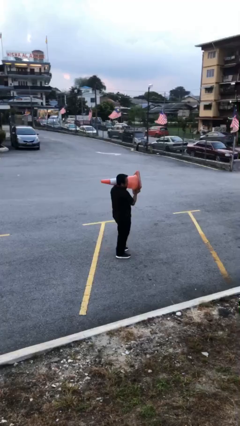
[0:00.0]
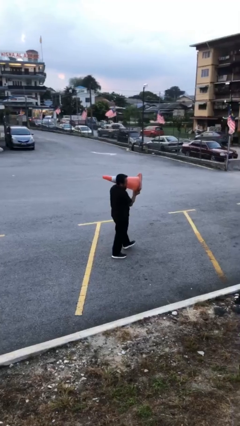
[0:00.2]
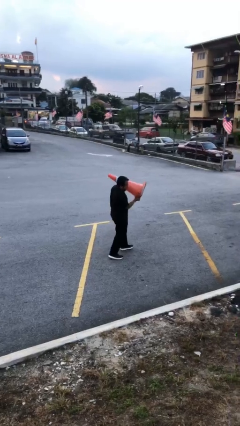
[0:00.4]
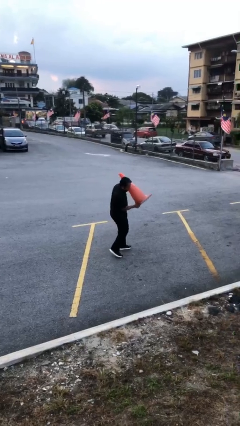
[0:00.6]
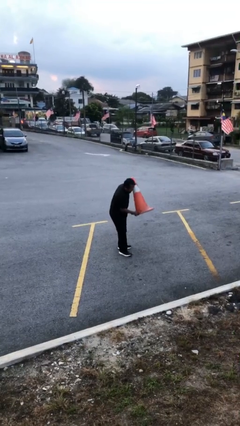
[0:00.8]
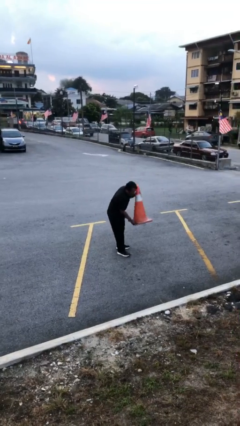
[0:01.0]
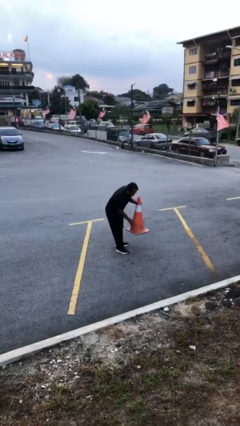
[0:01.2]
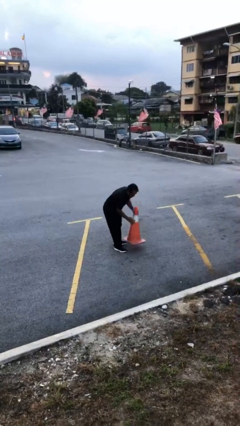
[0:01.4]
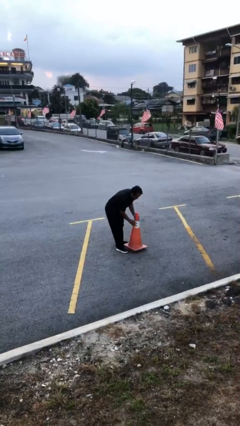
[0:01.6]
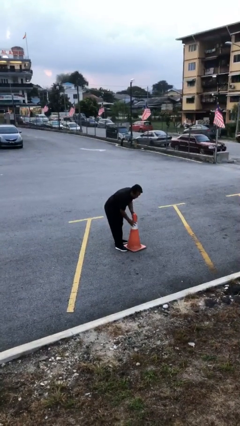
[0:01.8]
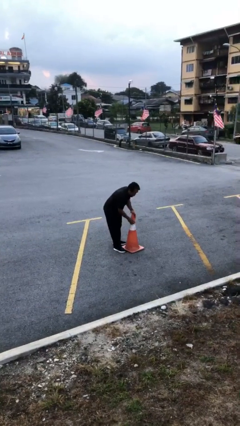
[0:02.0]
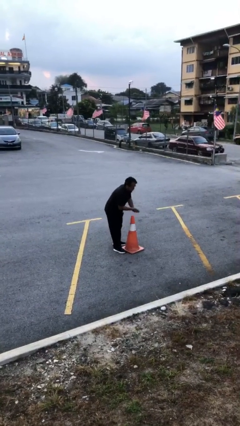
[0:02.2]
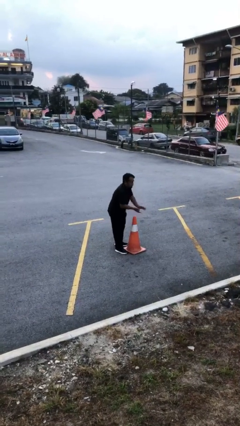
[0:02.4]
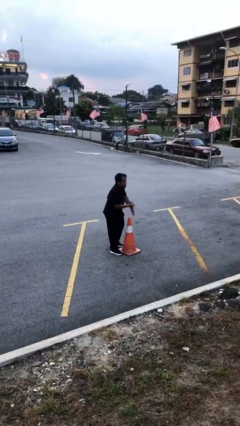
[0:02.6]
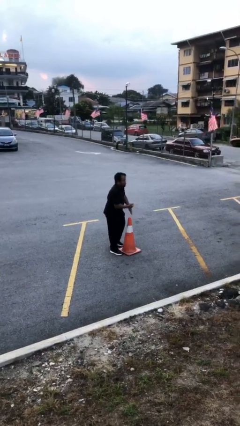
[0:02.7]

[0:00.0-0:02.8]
person puts down object on floor

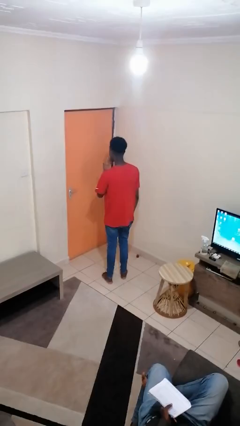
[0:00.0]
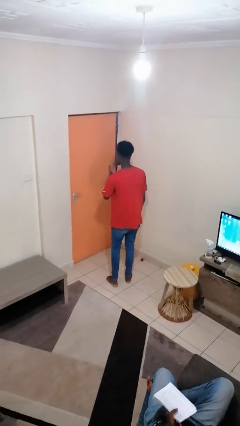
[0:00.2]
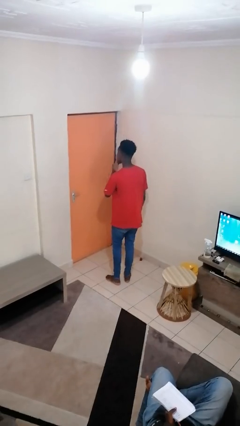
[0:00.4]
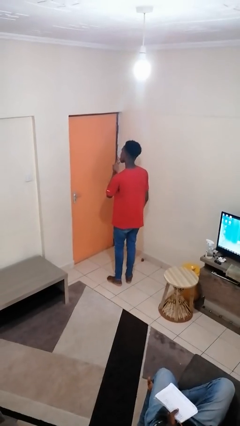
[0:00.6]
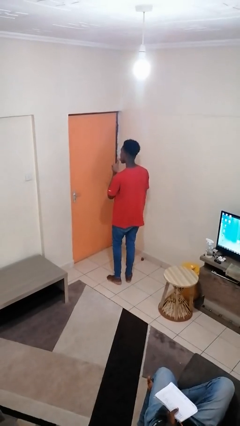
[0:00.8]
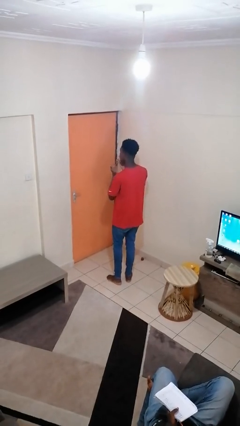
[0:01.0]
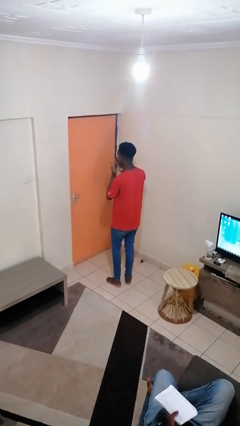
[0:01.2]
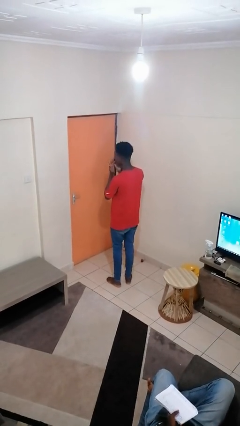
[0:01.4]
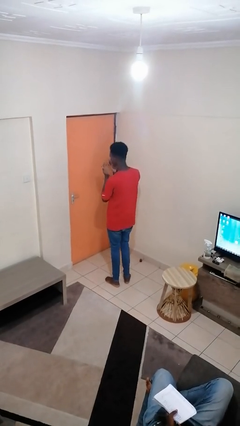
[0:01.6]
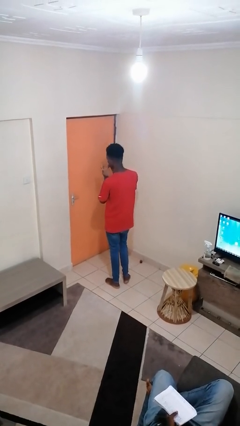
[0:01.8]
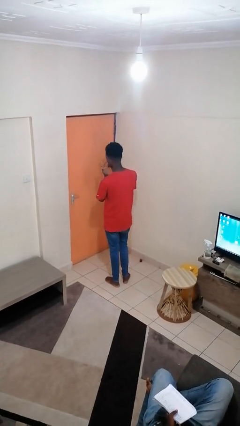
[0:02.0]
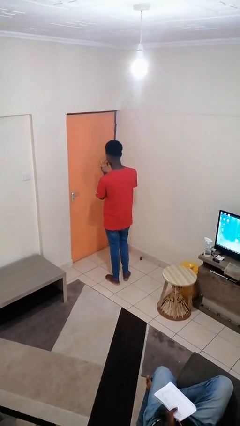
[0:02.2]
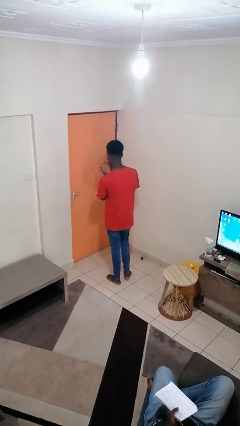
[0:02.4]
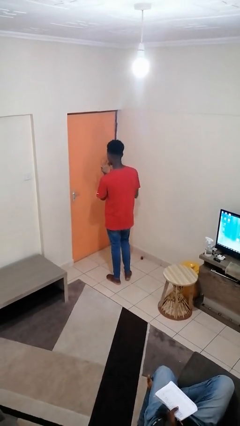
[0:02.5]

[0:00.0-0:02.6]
person licks fingers

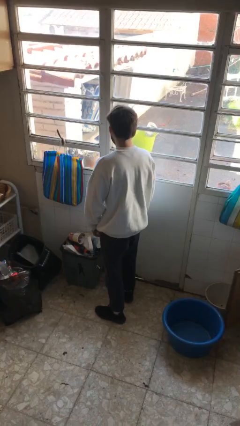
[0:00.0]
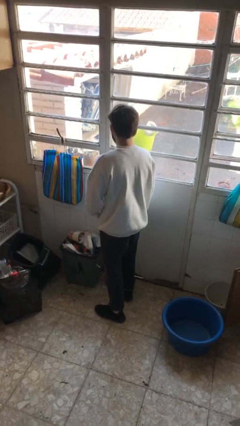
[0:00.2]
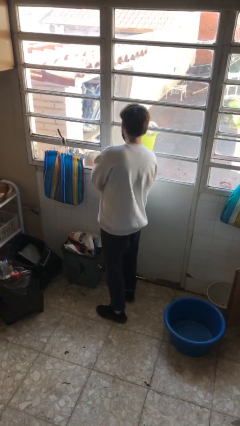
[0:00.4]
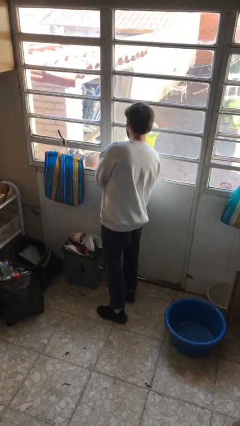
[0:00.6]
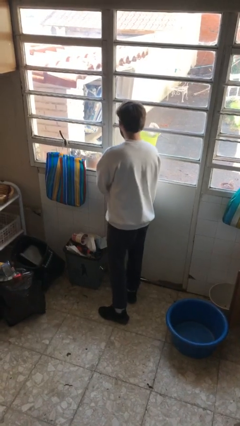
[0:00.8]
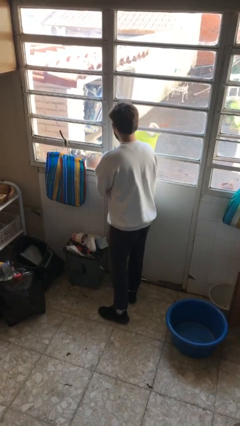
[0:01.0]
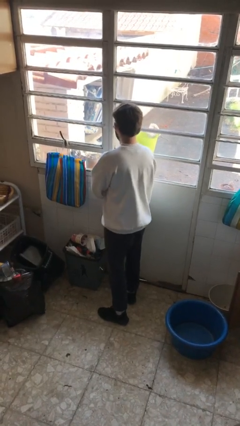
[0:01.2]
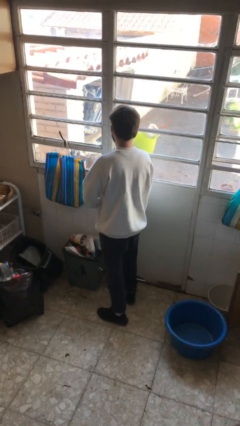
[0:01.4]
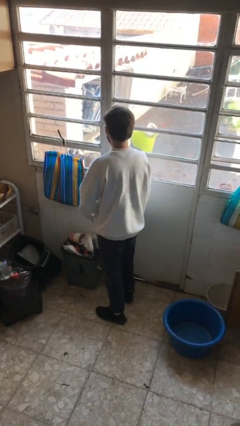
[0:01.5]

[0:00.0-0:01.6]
person locks door with keys

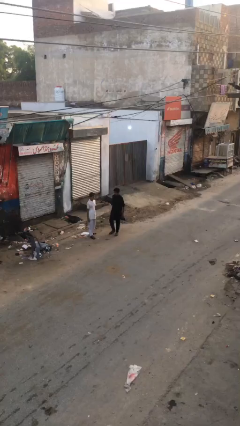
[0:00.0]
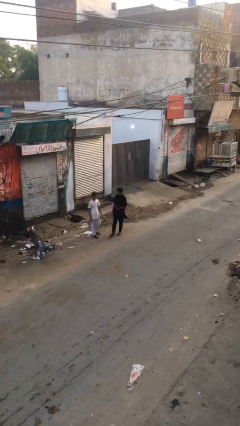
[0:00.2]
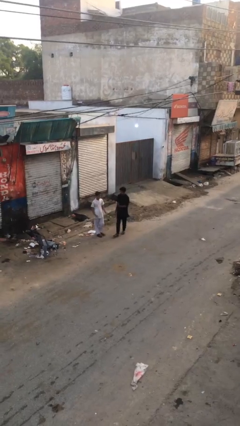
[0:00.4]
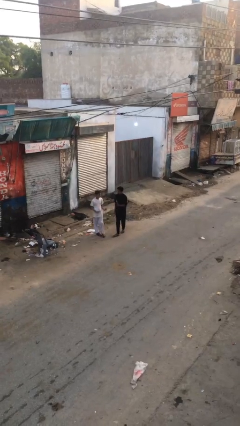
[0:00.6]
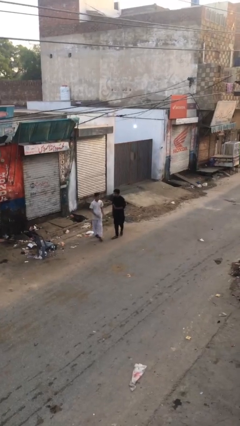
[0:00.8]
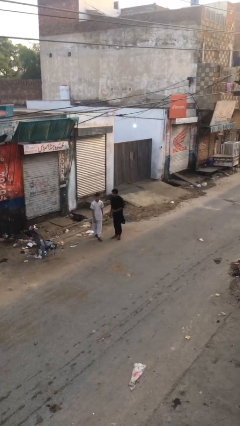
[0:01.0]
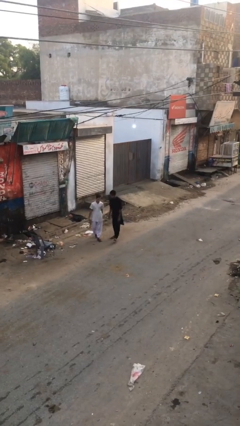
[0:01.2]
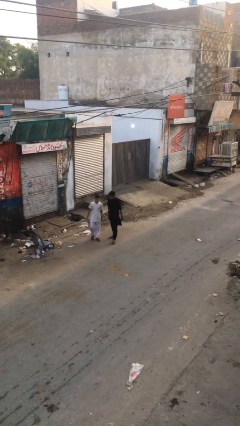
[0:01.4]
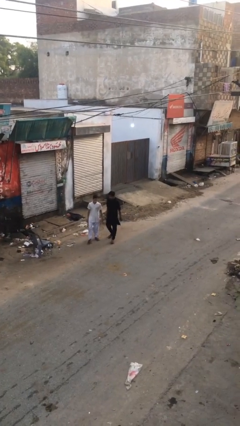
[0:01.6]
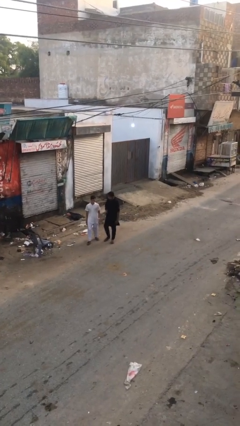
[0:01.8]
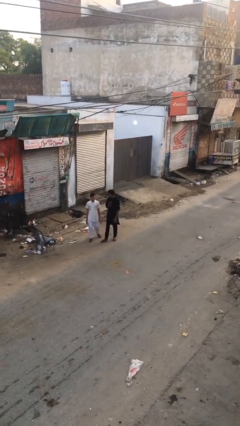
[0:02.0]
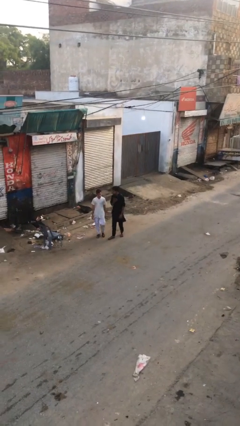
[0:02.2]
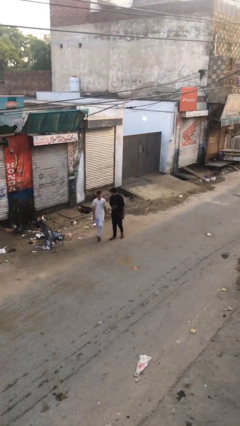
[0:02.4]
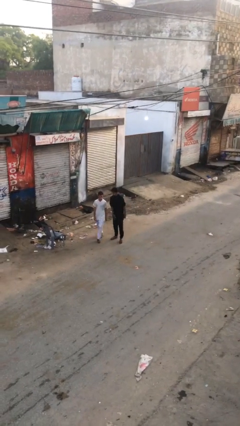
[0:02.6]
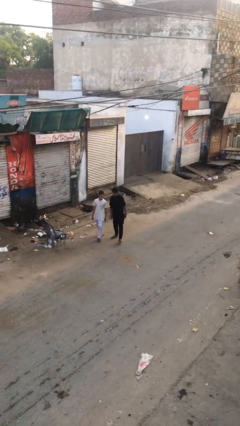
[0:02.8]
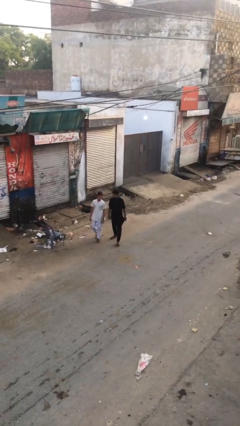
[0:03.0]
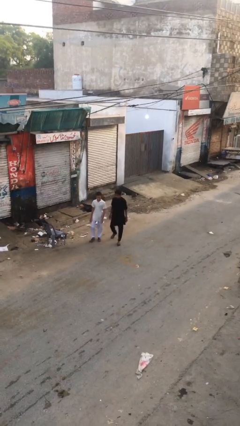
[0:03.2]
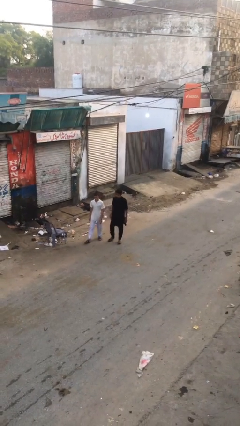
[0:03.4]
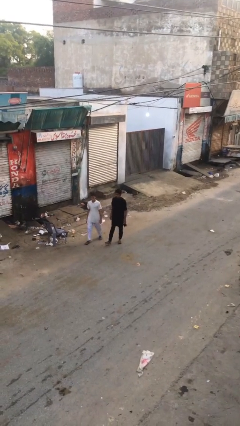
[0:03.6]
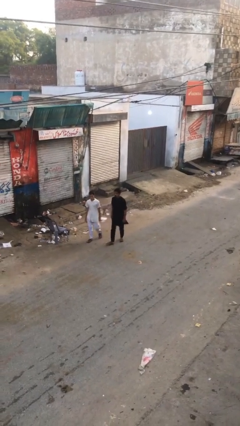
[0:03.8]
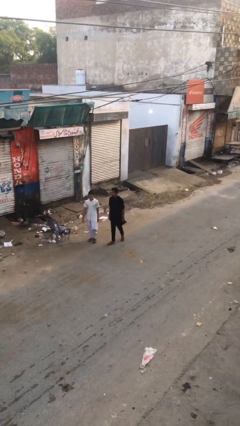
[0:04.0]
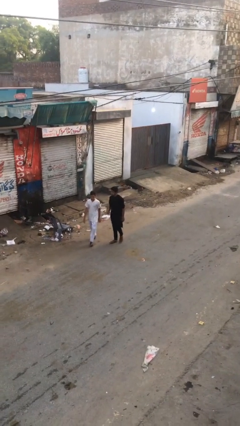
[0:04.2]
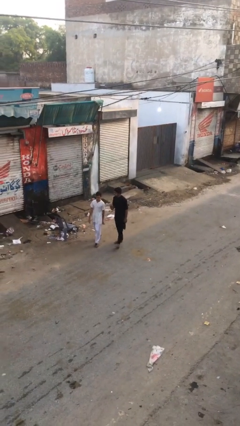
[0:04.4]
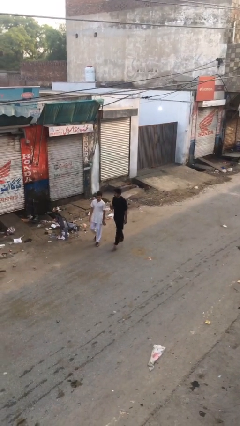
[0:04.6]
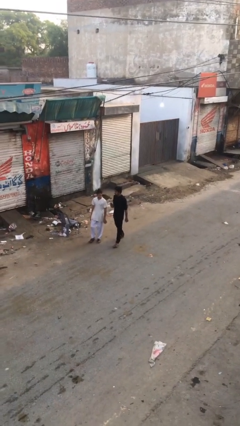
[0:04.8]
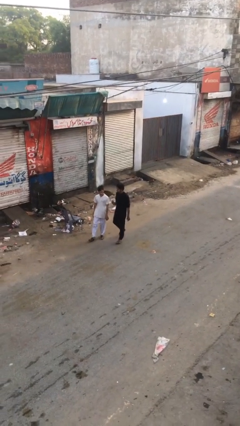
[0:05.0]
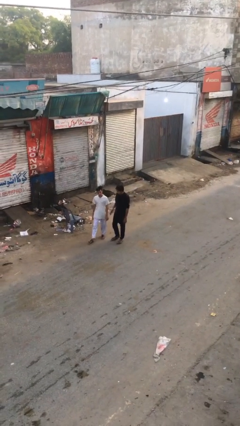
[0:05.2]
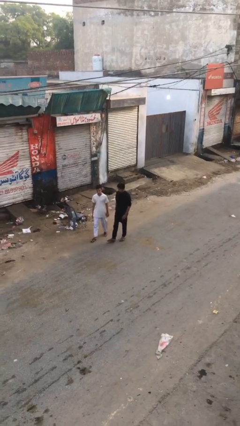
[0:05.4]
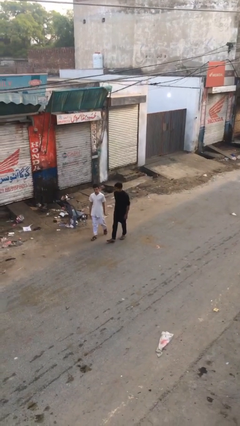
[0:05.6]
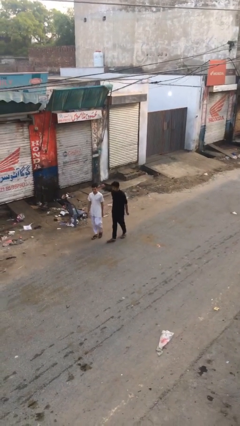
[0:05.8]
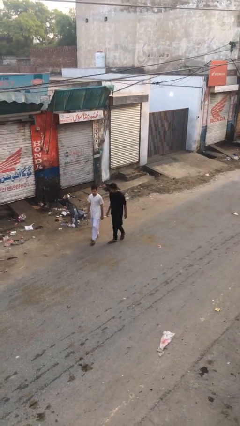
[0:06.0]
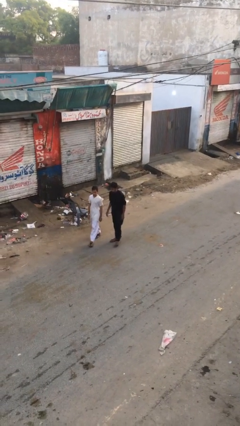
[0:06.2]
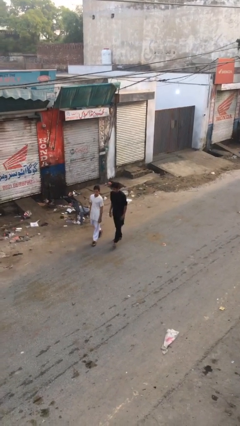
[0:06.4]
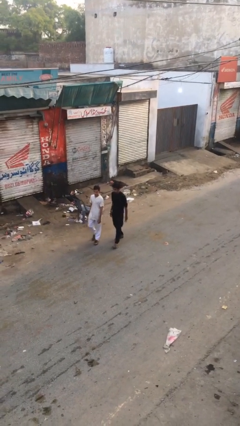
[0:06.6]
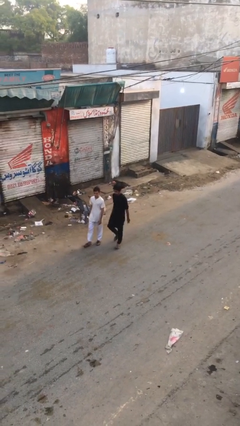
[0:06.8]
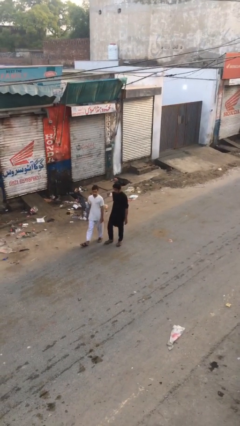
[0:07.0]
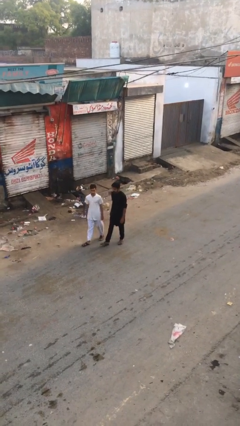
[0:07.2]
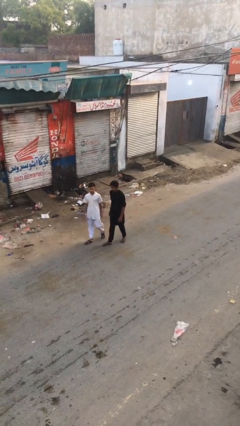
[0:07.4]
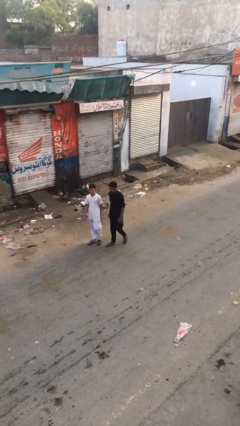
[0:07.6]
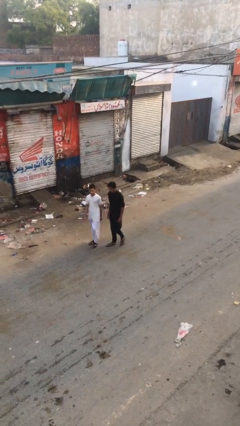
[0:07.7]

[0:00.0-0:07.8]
person talks to person

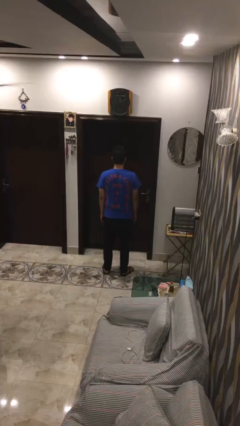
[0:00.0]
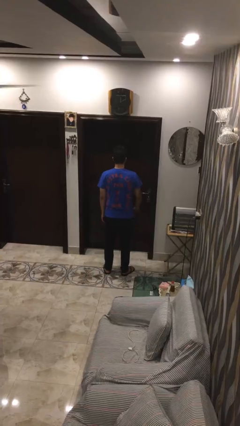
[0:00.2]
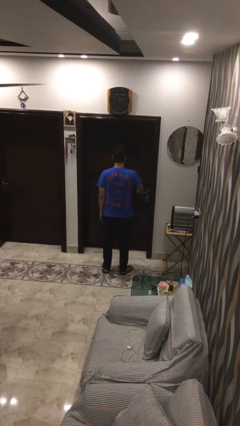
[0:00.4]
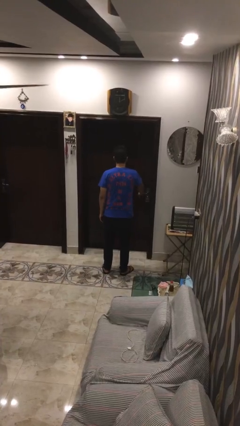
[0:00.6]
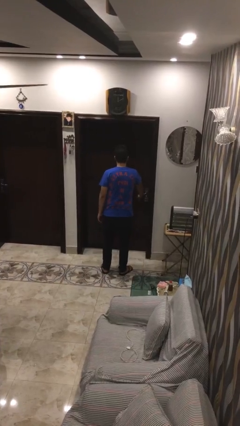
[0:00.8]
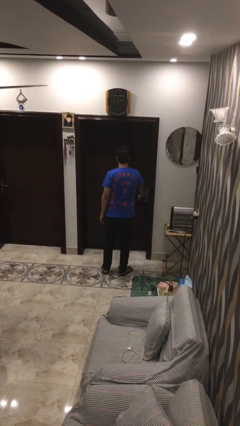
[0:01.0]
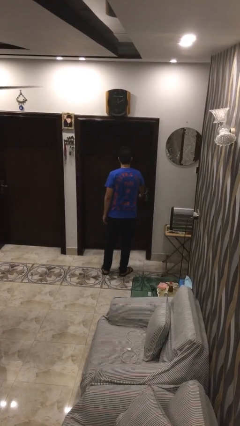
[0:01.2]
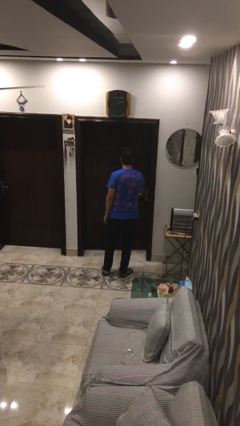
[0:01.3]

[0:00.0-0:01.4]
person opens facility door

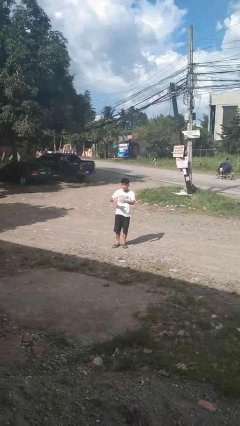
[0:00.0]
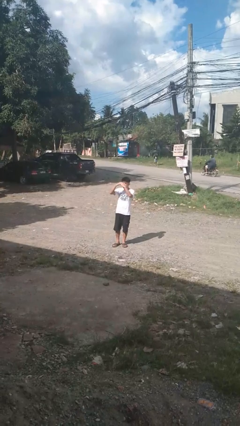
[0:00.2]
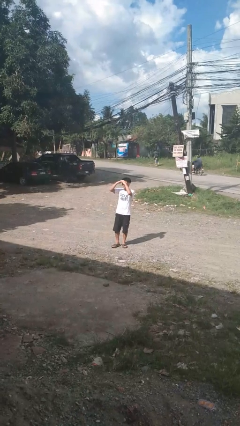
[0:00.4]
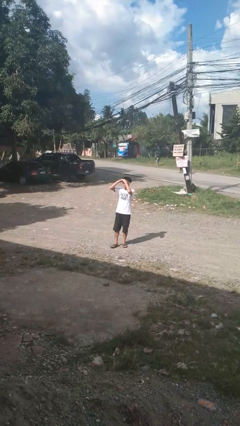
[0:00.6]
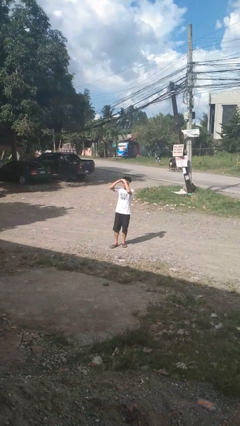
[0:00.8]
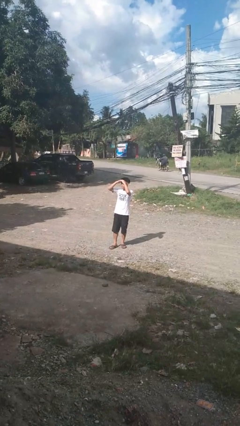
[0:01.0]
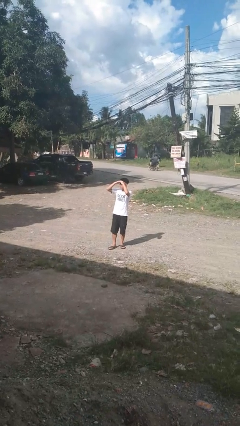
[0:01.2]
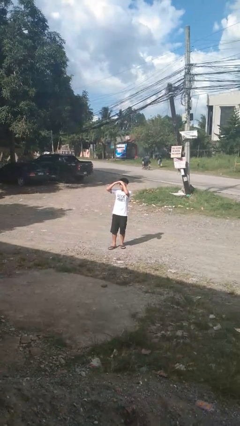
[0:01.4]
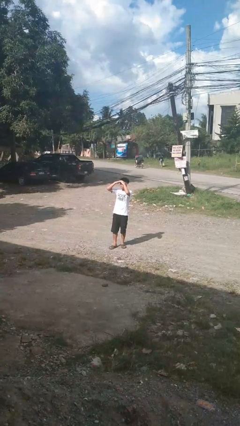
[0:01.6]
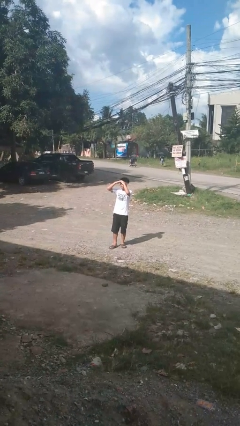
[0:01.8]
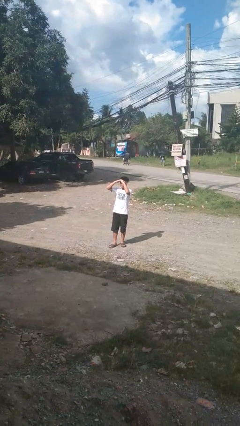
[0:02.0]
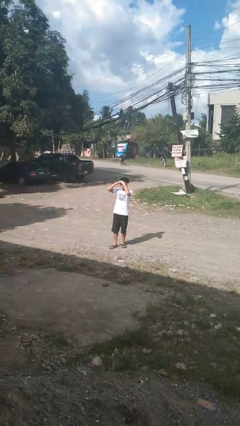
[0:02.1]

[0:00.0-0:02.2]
person shades eyes
